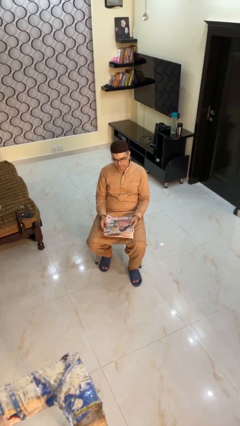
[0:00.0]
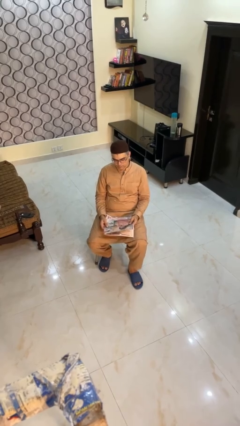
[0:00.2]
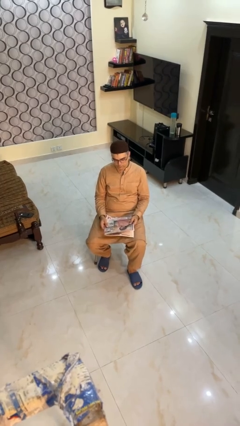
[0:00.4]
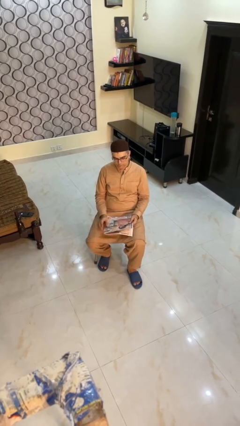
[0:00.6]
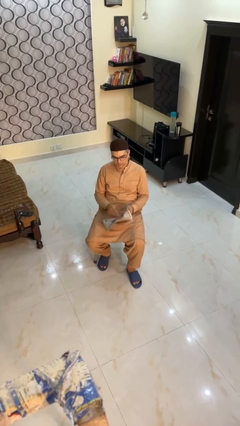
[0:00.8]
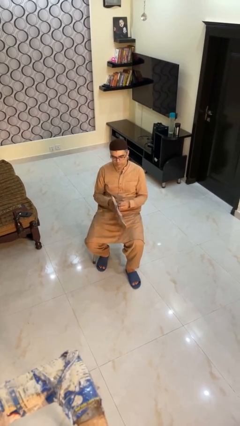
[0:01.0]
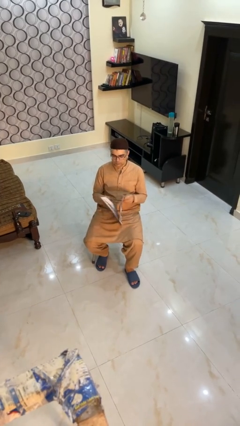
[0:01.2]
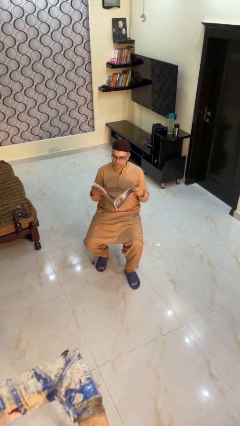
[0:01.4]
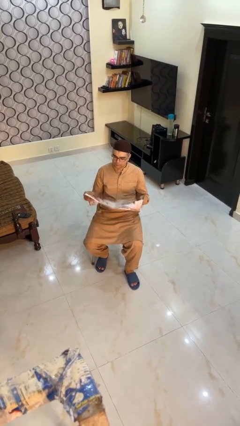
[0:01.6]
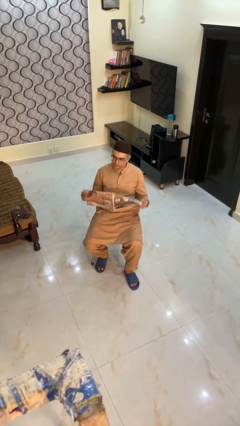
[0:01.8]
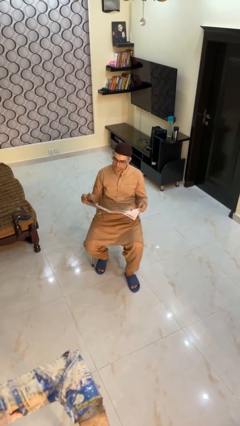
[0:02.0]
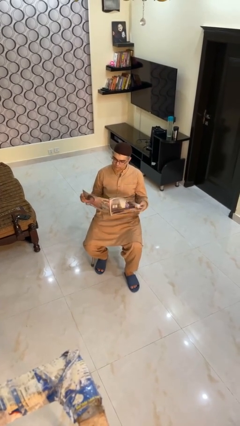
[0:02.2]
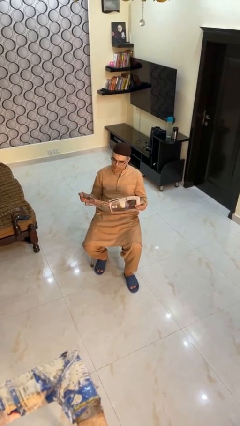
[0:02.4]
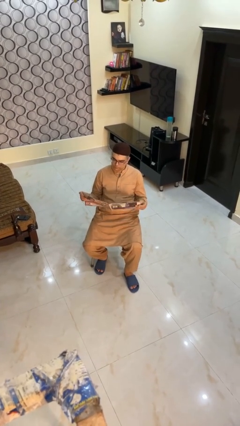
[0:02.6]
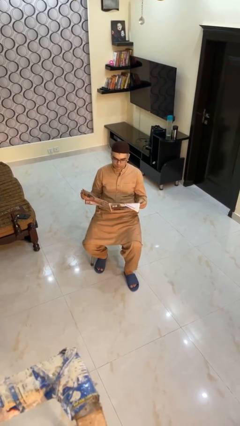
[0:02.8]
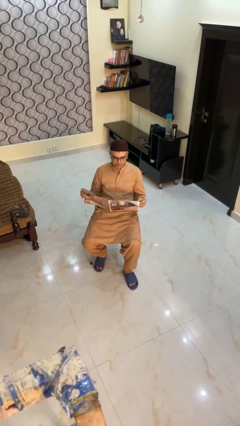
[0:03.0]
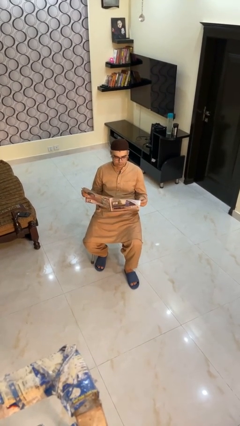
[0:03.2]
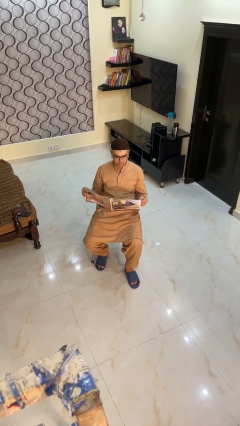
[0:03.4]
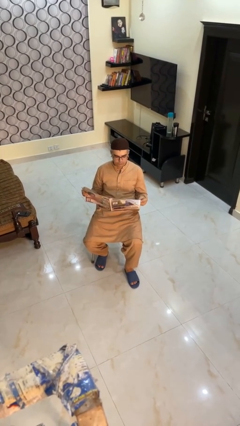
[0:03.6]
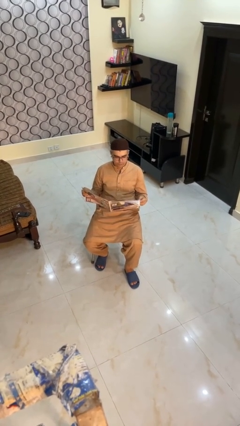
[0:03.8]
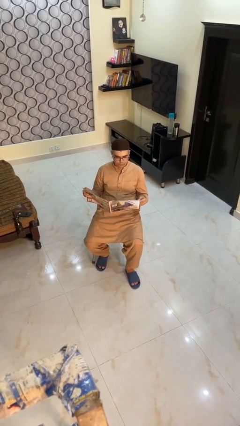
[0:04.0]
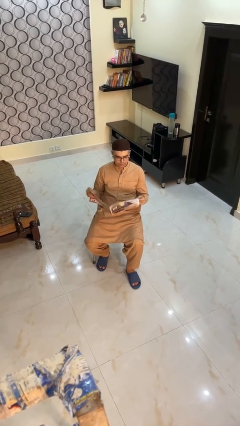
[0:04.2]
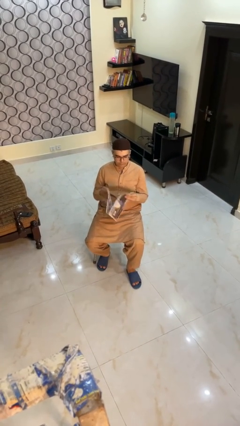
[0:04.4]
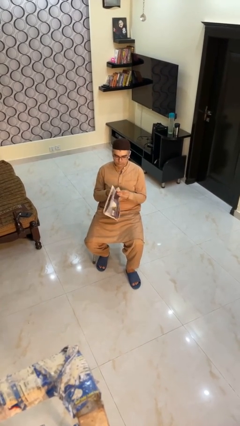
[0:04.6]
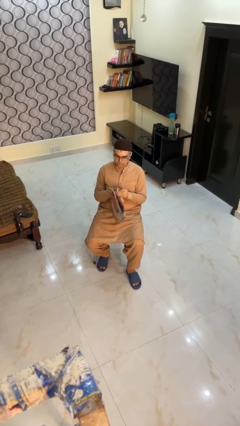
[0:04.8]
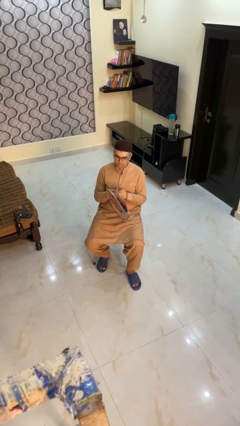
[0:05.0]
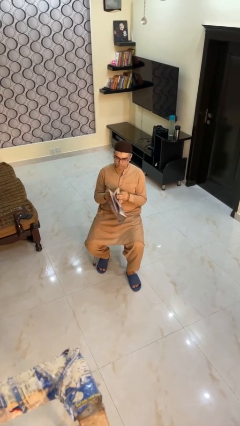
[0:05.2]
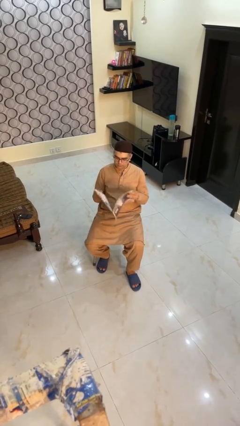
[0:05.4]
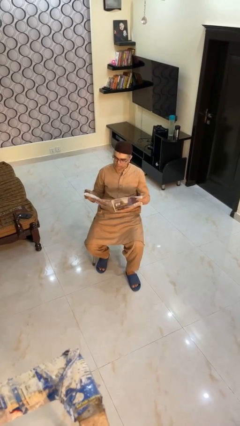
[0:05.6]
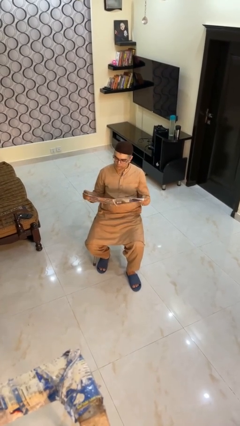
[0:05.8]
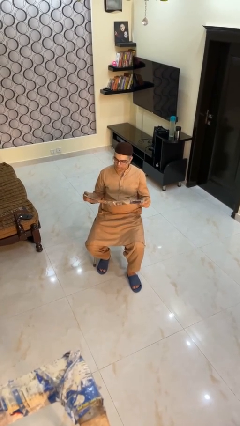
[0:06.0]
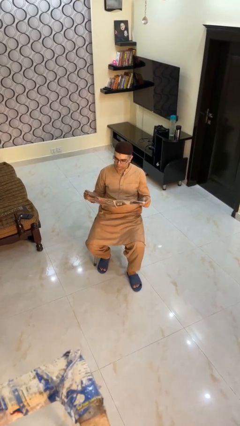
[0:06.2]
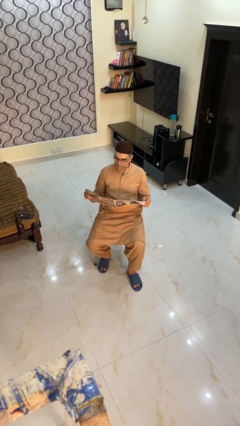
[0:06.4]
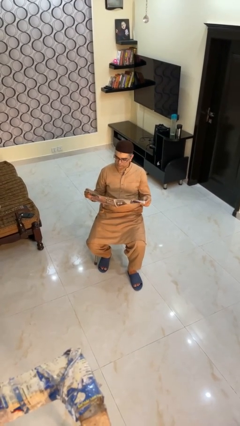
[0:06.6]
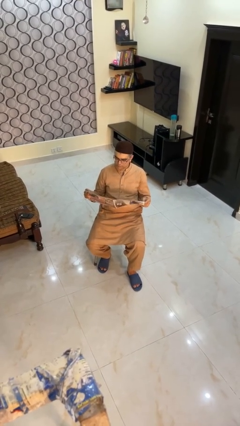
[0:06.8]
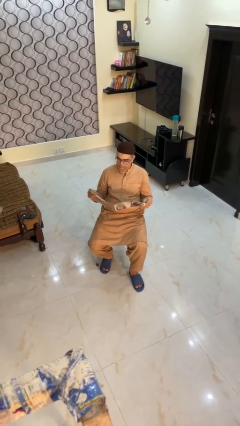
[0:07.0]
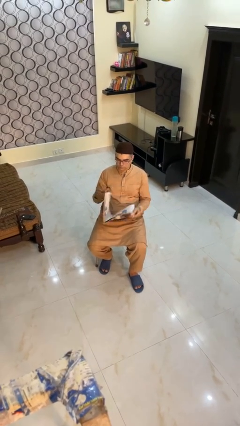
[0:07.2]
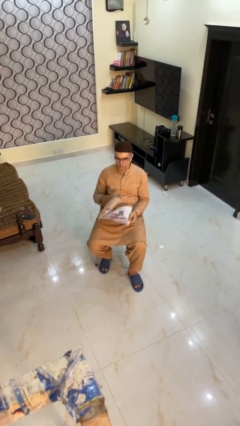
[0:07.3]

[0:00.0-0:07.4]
person reads magazine

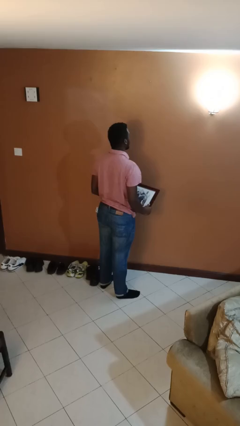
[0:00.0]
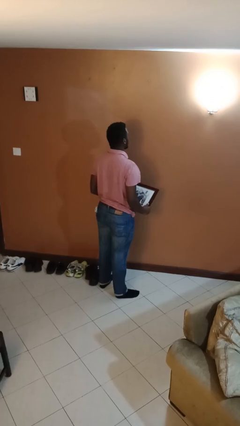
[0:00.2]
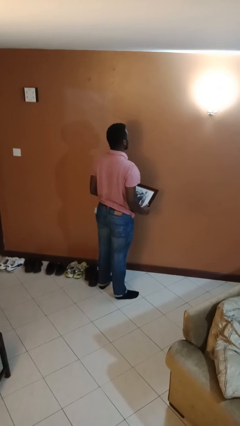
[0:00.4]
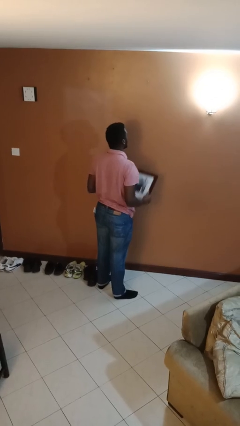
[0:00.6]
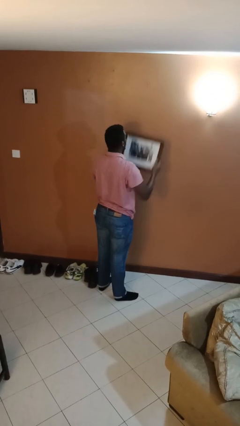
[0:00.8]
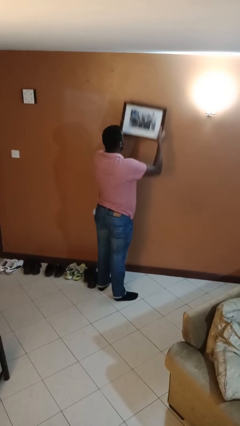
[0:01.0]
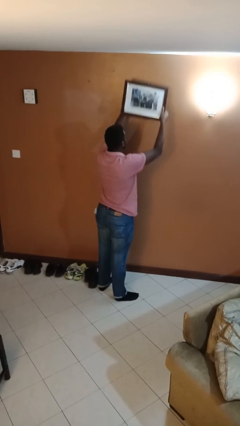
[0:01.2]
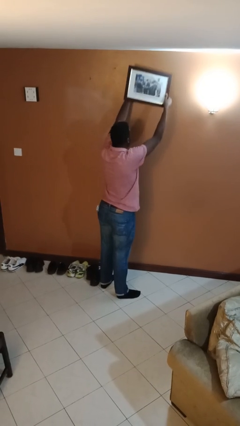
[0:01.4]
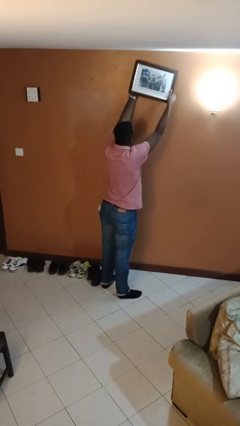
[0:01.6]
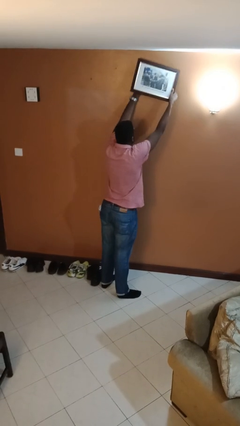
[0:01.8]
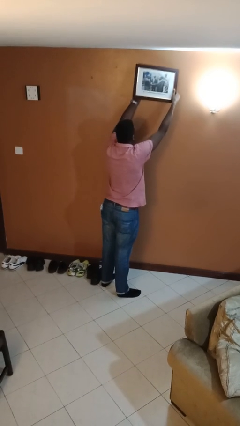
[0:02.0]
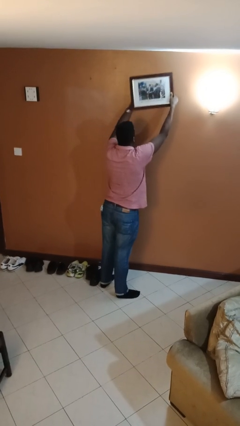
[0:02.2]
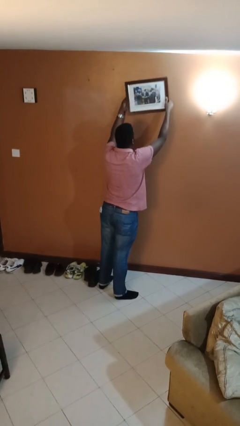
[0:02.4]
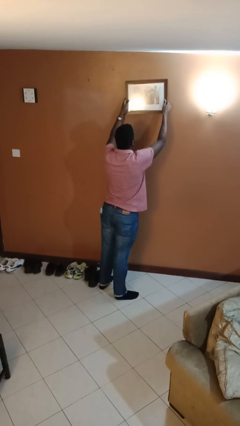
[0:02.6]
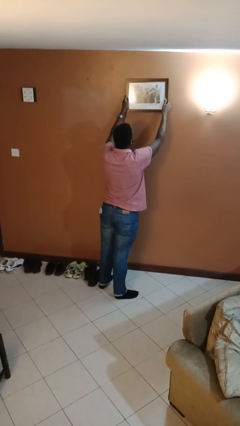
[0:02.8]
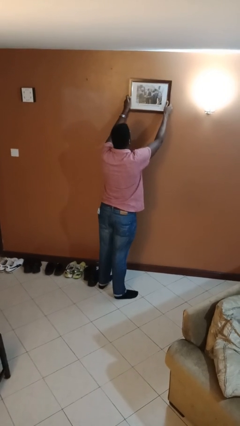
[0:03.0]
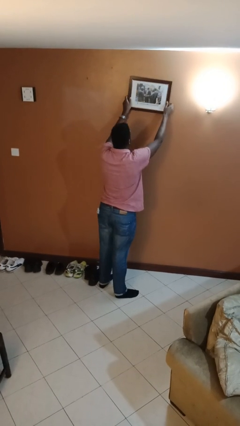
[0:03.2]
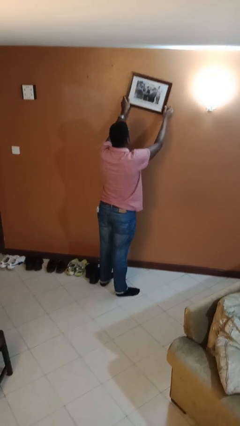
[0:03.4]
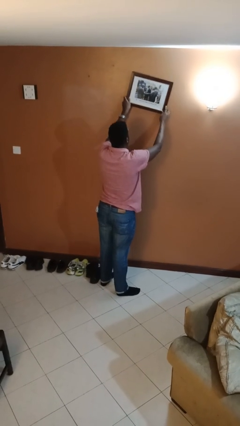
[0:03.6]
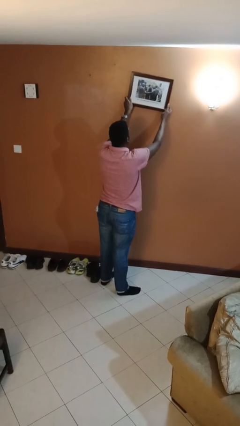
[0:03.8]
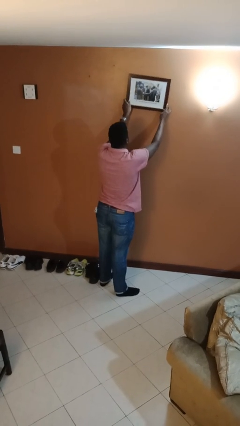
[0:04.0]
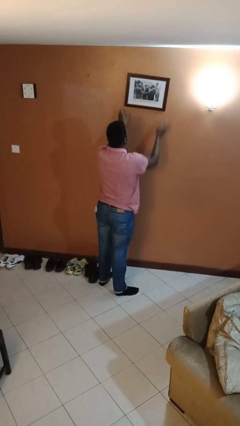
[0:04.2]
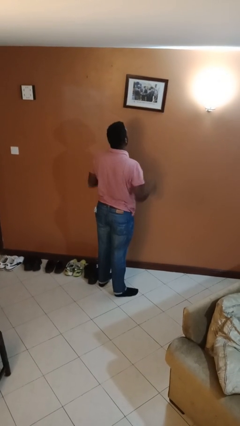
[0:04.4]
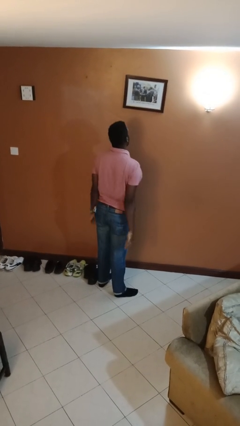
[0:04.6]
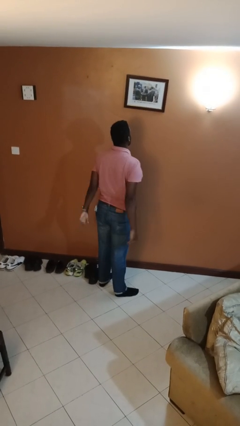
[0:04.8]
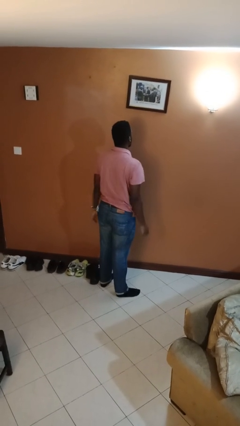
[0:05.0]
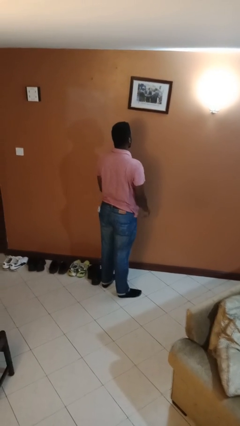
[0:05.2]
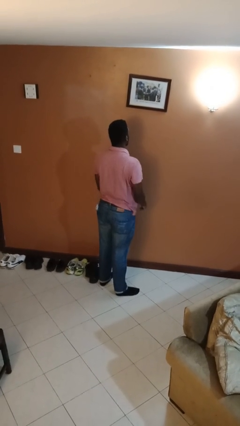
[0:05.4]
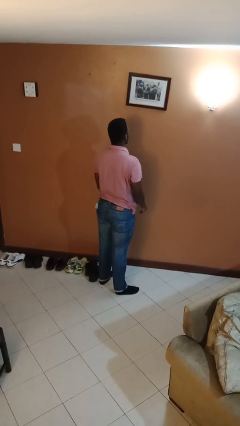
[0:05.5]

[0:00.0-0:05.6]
person puts up picture frame

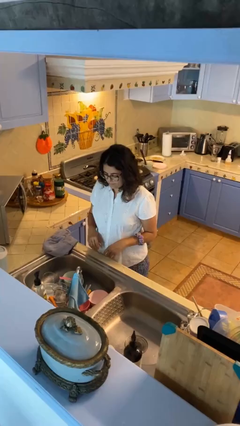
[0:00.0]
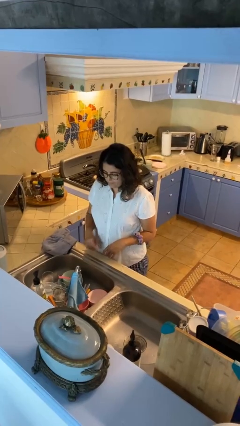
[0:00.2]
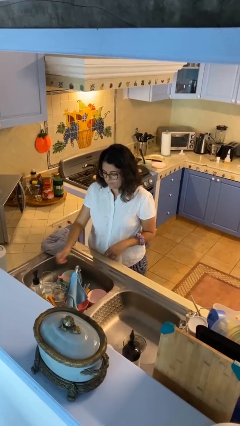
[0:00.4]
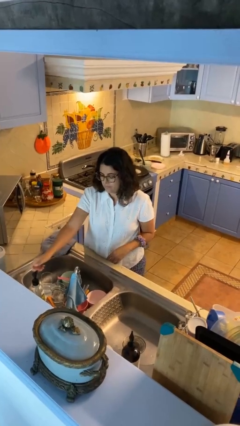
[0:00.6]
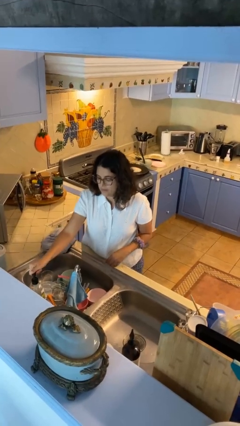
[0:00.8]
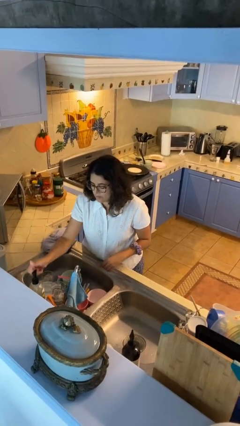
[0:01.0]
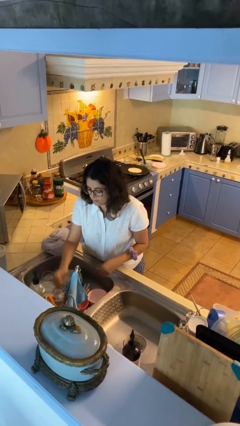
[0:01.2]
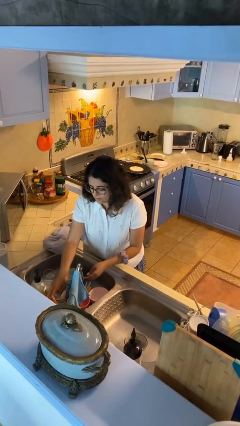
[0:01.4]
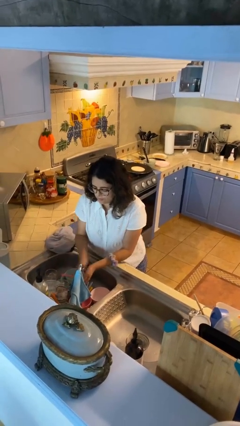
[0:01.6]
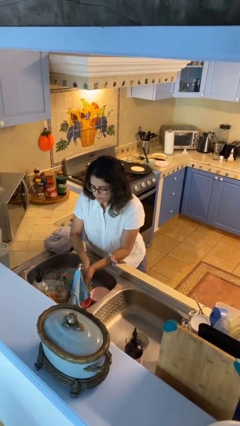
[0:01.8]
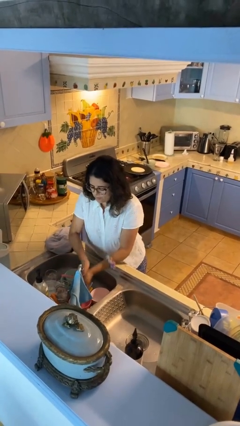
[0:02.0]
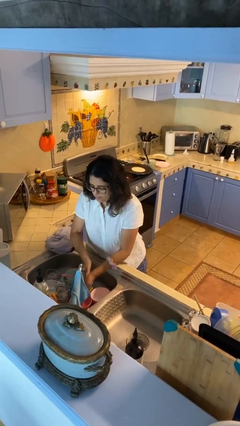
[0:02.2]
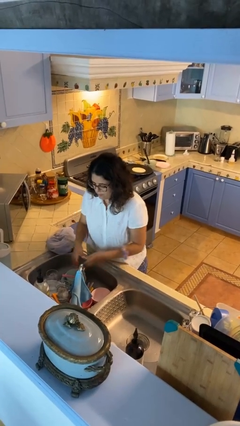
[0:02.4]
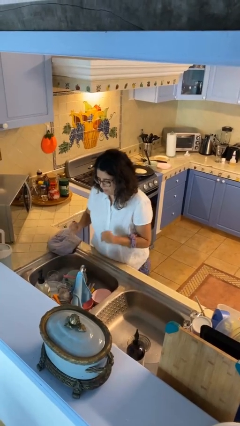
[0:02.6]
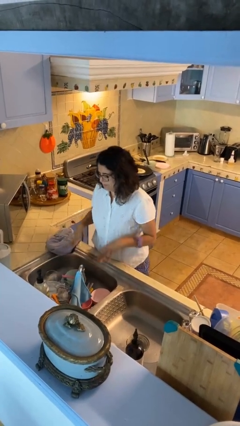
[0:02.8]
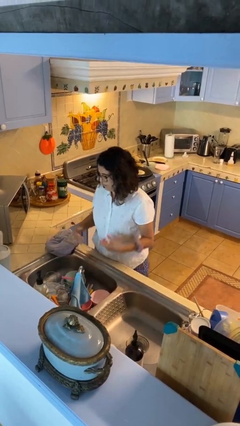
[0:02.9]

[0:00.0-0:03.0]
person washes hands

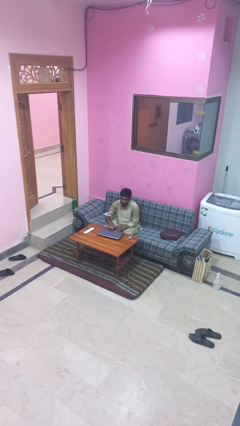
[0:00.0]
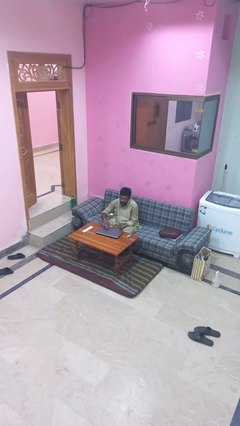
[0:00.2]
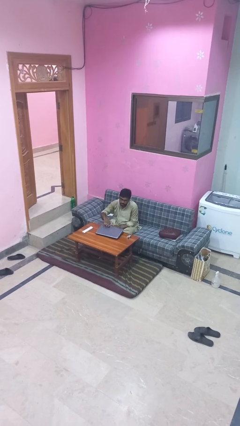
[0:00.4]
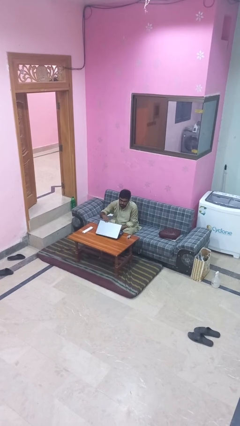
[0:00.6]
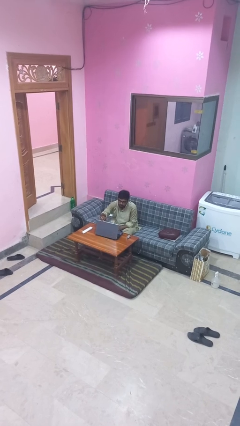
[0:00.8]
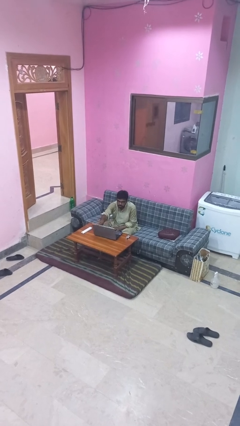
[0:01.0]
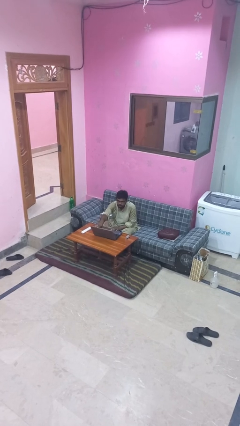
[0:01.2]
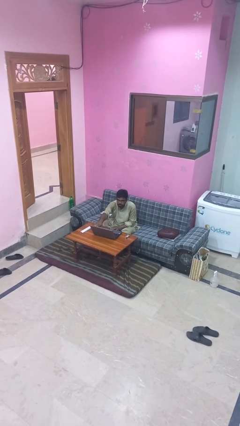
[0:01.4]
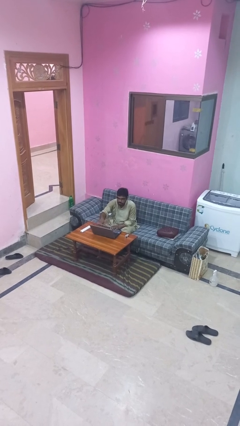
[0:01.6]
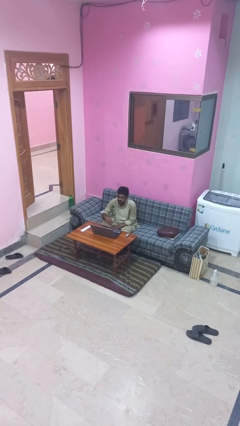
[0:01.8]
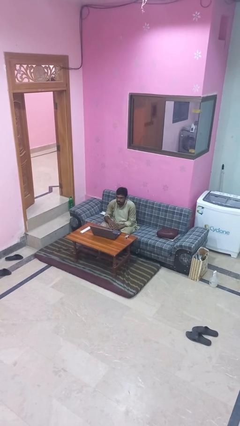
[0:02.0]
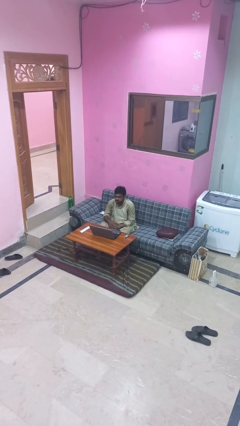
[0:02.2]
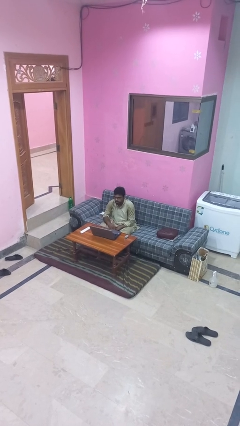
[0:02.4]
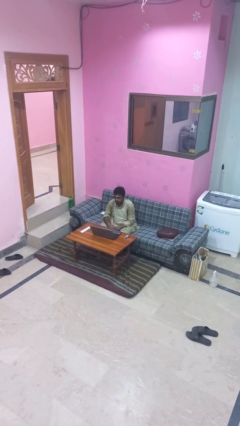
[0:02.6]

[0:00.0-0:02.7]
person opens laptop
